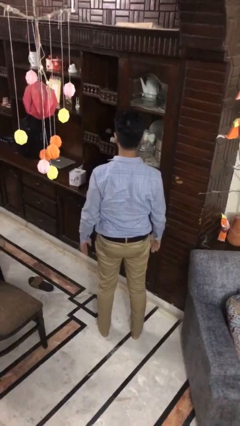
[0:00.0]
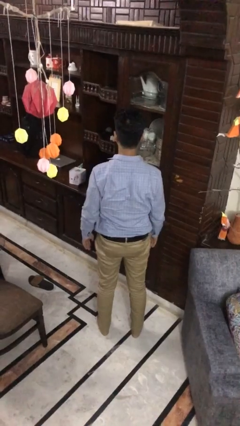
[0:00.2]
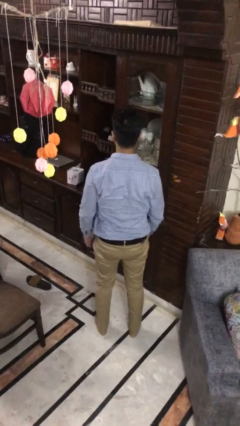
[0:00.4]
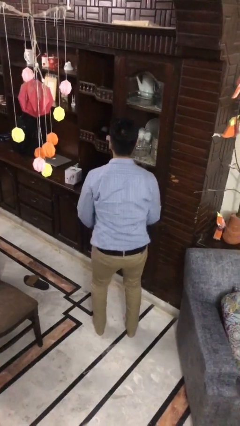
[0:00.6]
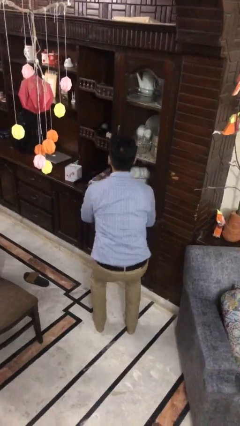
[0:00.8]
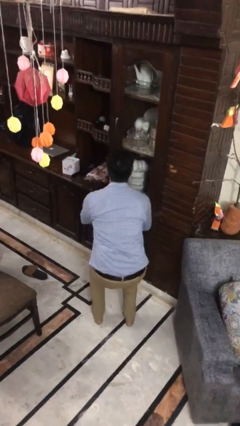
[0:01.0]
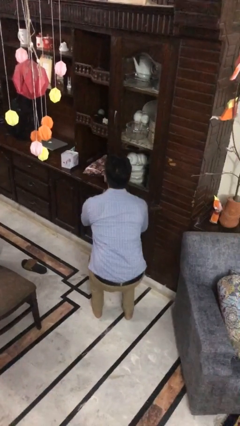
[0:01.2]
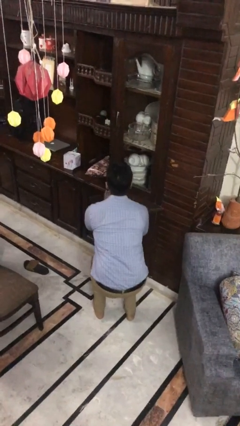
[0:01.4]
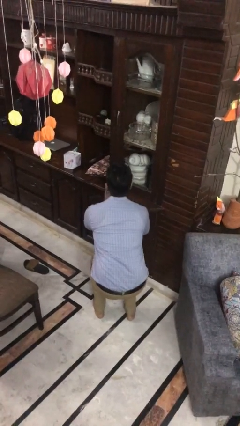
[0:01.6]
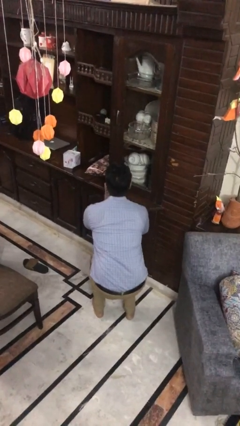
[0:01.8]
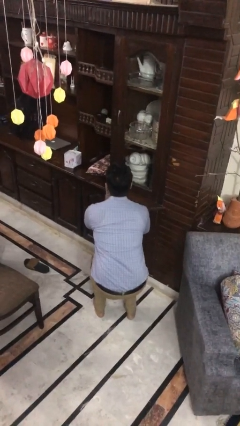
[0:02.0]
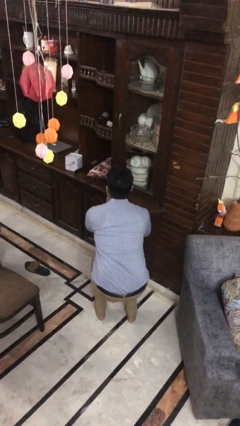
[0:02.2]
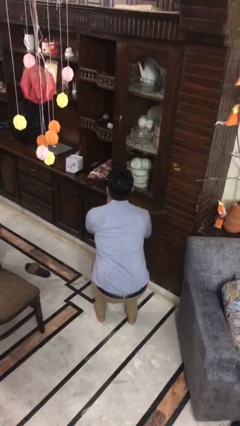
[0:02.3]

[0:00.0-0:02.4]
person squats

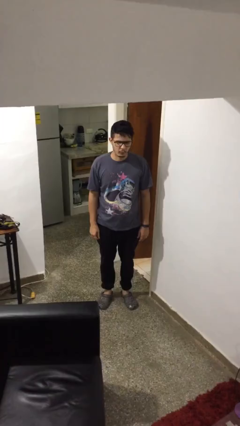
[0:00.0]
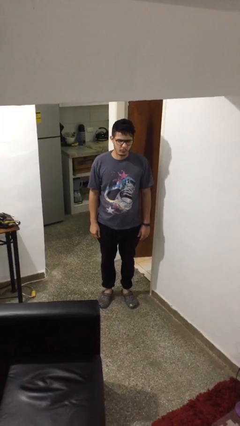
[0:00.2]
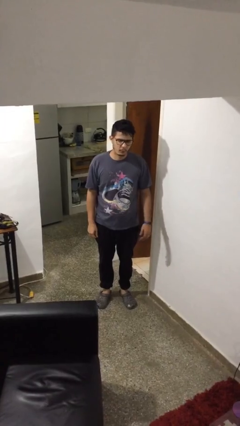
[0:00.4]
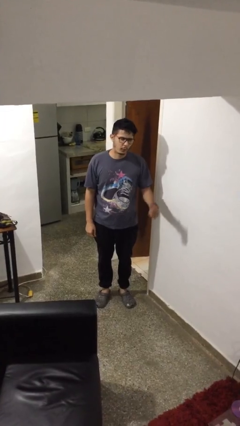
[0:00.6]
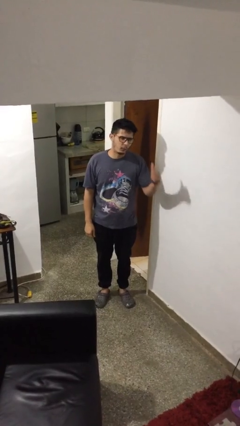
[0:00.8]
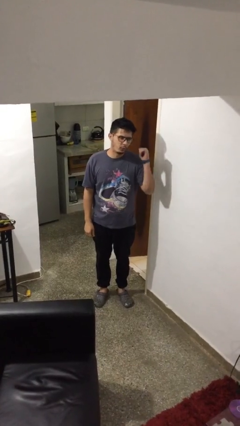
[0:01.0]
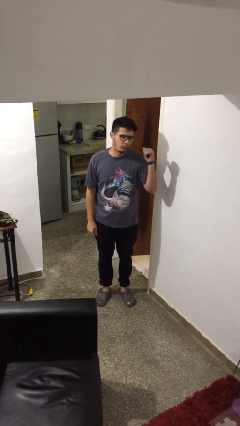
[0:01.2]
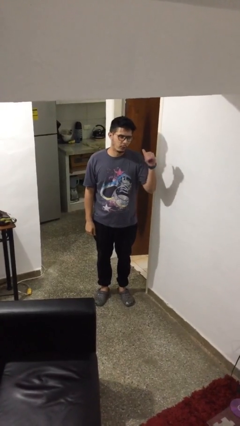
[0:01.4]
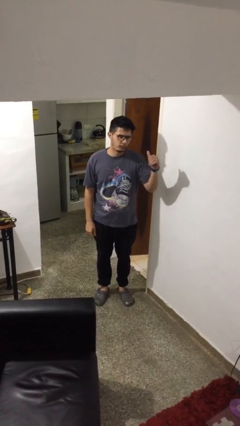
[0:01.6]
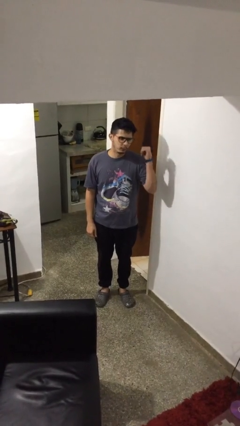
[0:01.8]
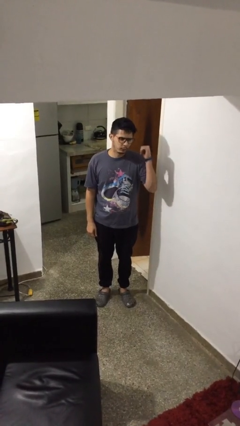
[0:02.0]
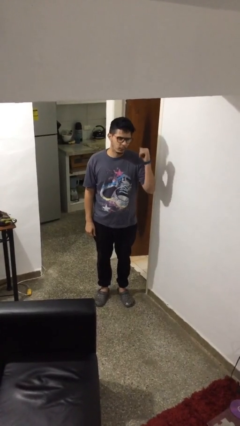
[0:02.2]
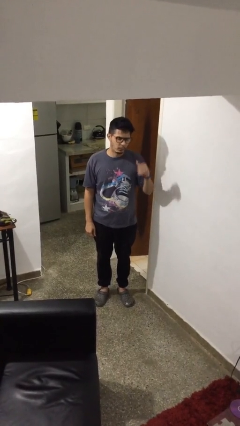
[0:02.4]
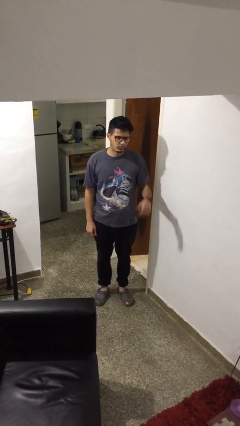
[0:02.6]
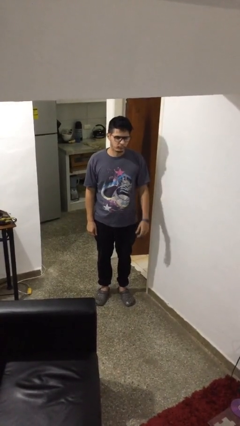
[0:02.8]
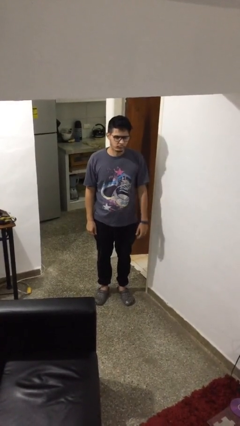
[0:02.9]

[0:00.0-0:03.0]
person gestures behind me

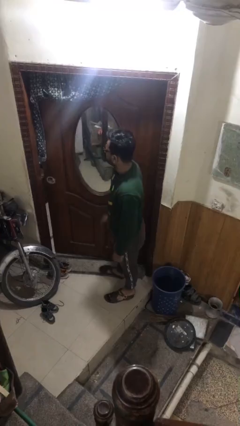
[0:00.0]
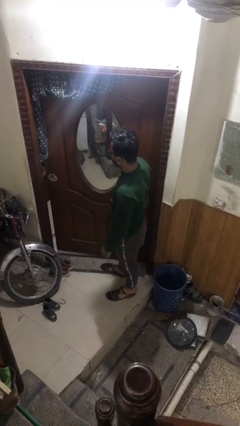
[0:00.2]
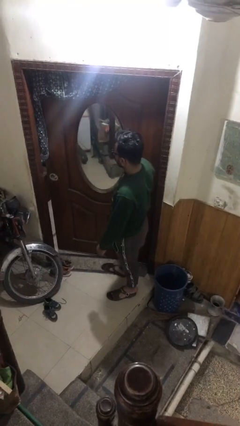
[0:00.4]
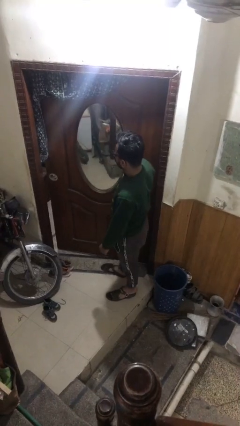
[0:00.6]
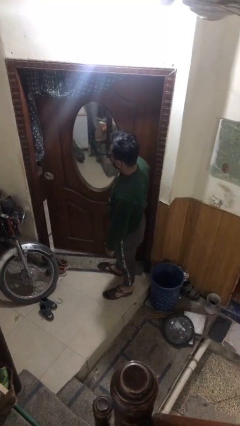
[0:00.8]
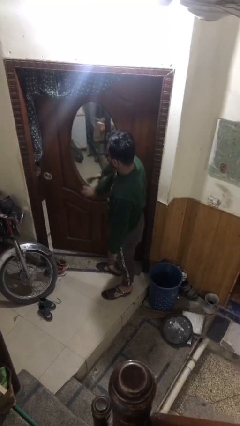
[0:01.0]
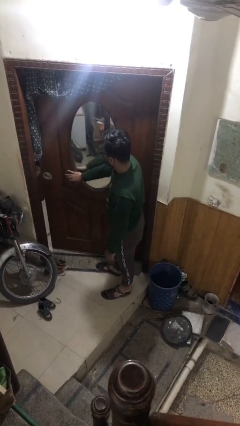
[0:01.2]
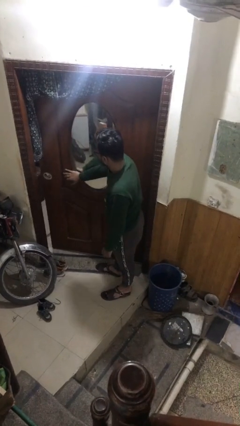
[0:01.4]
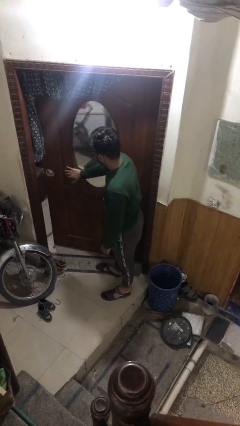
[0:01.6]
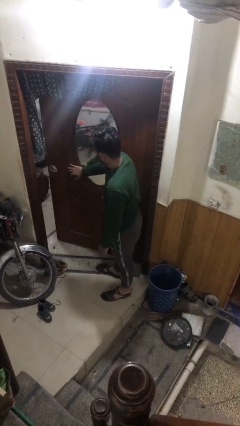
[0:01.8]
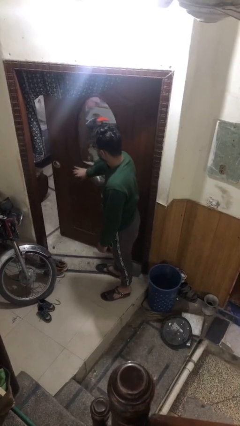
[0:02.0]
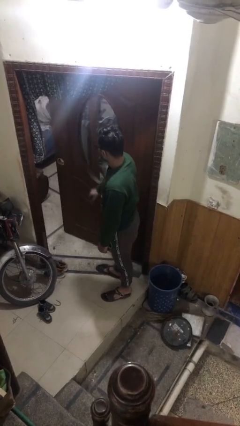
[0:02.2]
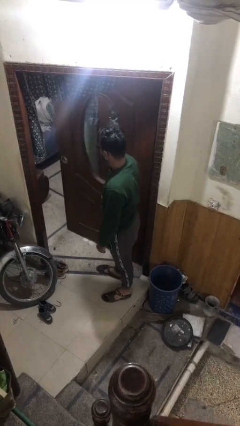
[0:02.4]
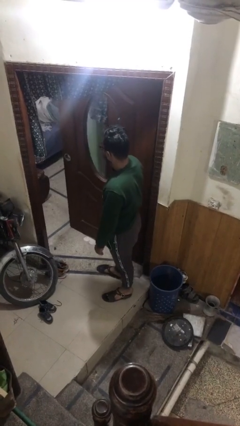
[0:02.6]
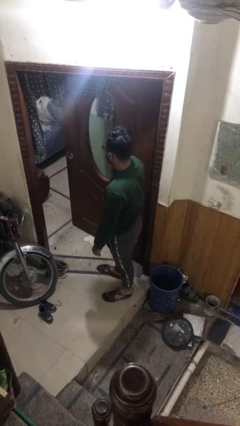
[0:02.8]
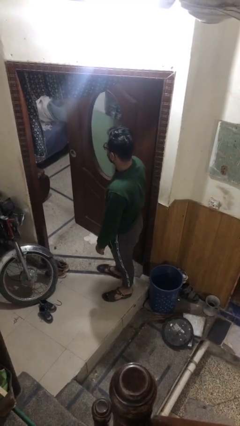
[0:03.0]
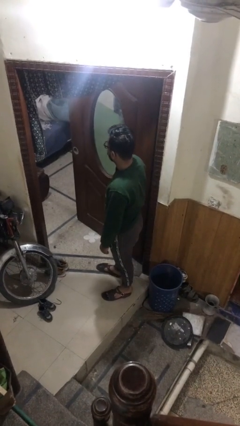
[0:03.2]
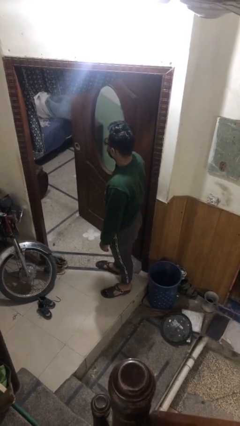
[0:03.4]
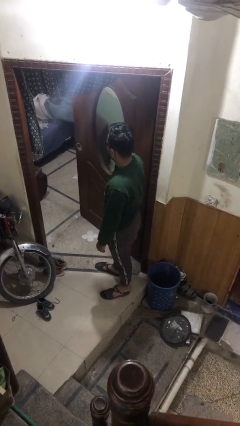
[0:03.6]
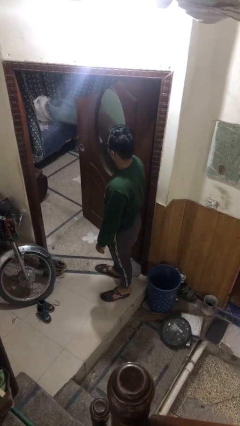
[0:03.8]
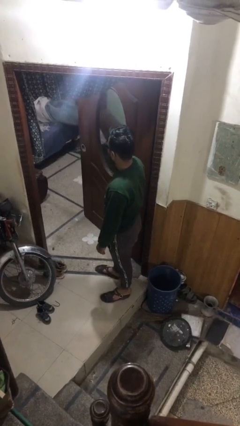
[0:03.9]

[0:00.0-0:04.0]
person opens facility door

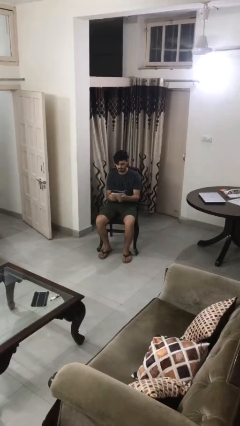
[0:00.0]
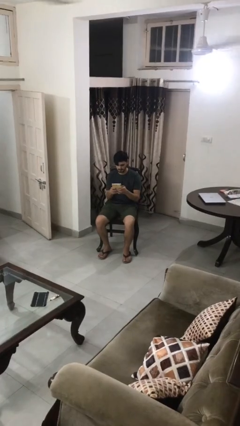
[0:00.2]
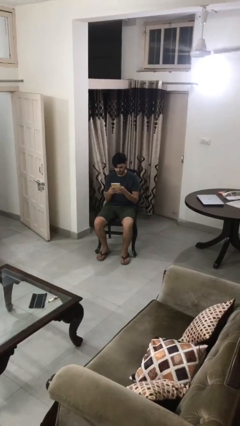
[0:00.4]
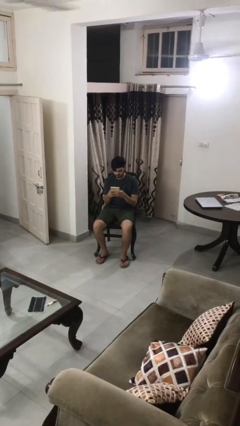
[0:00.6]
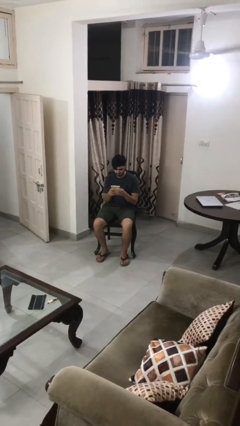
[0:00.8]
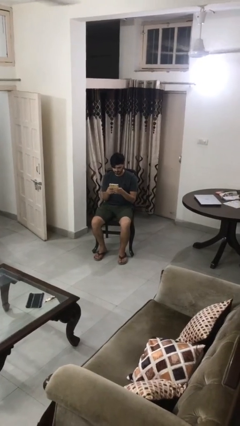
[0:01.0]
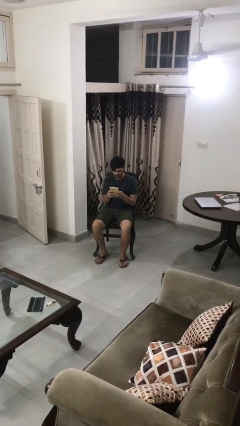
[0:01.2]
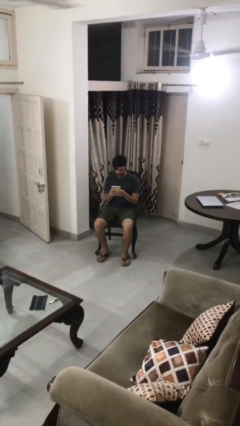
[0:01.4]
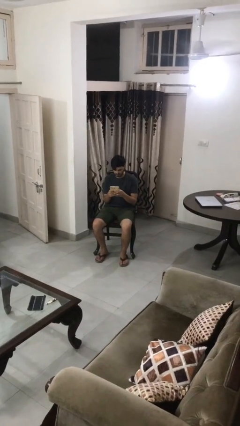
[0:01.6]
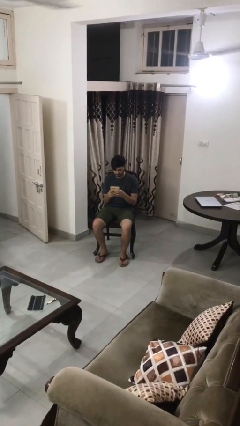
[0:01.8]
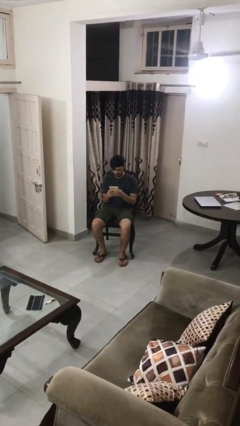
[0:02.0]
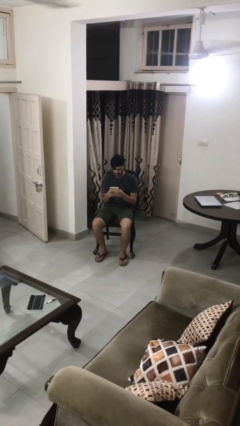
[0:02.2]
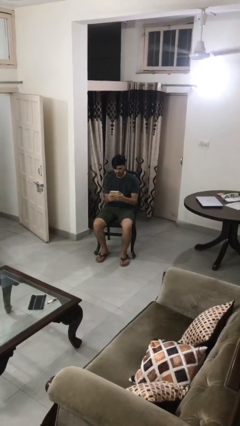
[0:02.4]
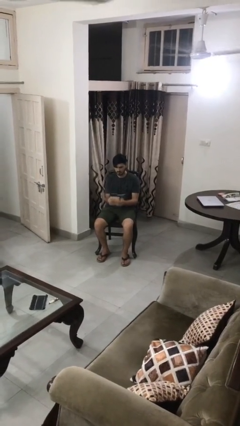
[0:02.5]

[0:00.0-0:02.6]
person interacts with tablet

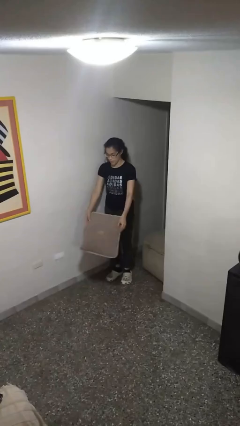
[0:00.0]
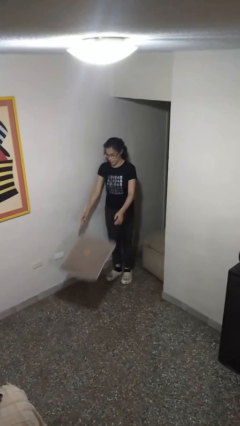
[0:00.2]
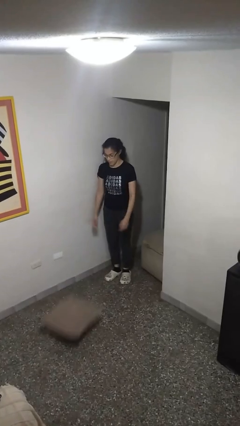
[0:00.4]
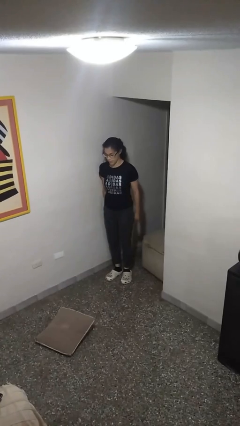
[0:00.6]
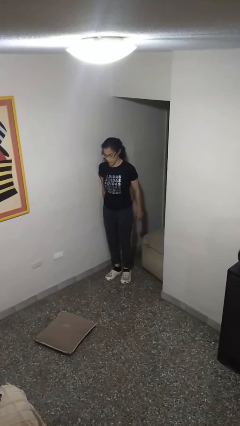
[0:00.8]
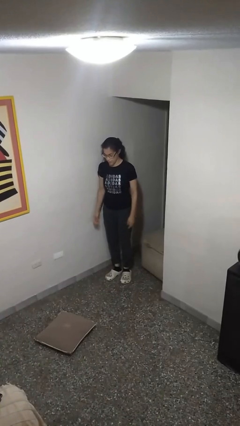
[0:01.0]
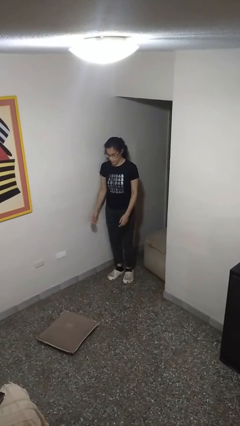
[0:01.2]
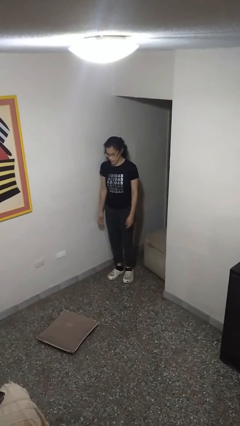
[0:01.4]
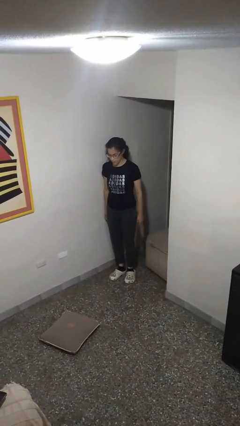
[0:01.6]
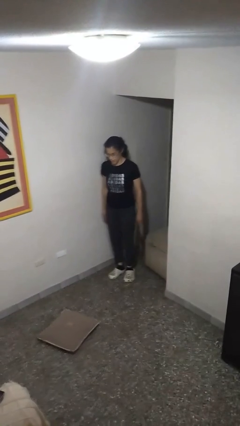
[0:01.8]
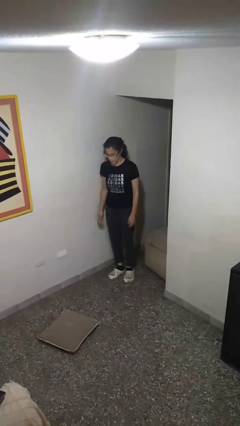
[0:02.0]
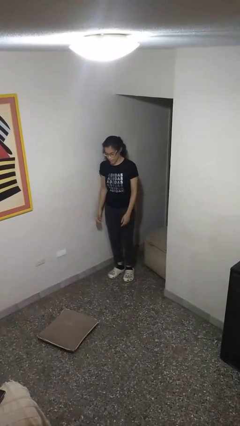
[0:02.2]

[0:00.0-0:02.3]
person throws object to ground

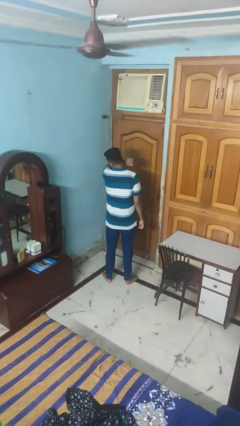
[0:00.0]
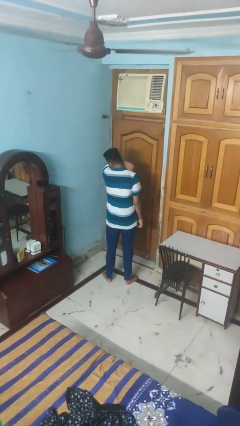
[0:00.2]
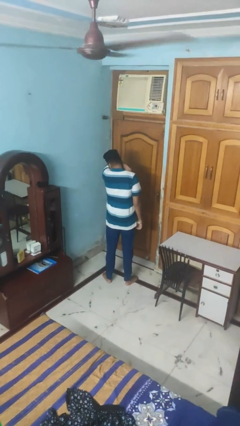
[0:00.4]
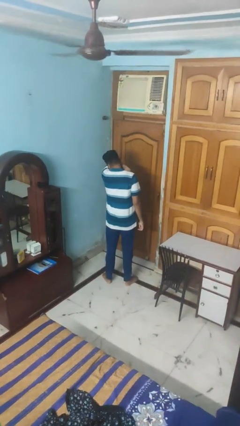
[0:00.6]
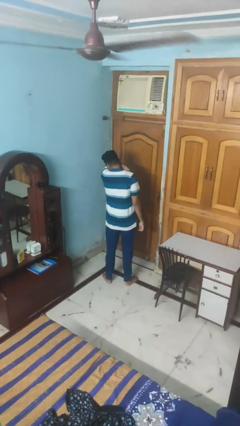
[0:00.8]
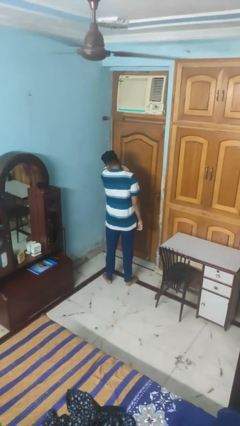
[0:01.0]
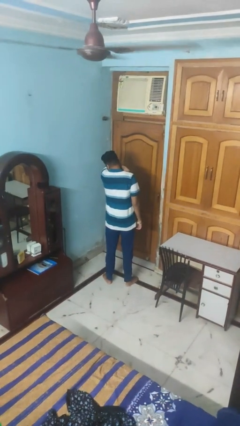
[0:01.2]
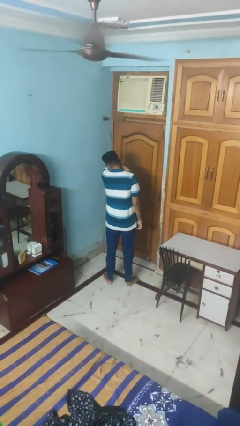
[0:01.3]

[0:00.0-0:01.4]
person sneezes into arm

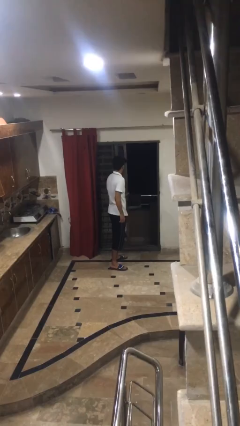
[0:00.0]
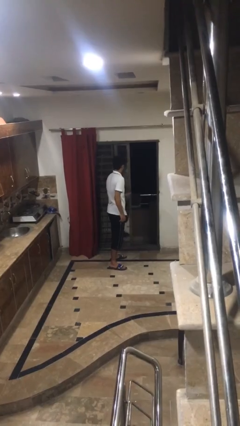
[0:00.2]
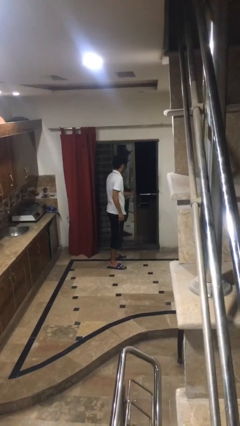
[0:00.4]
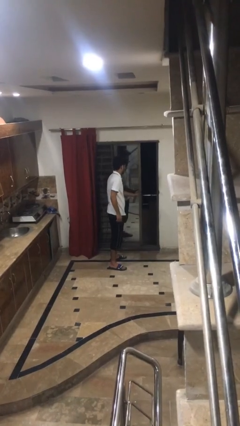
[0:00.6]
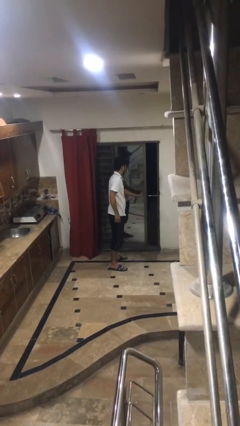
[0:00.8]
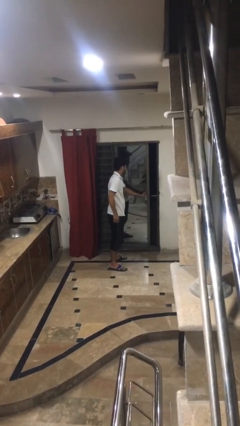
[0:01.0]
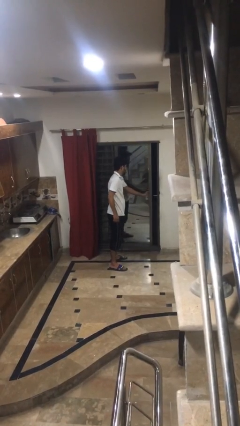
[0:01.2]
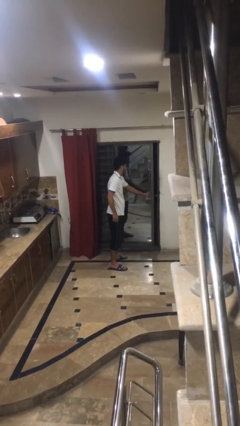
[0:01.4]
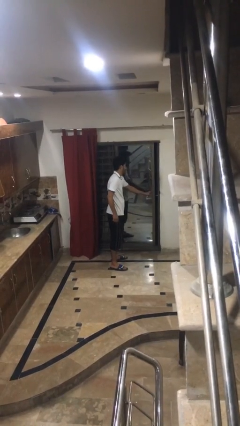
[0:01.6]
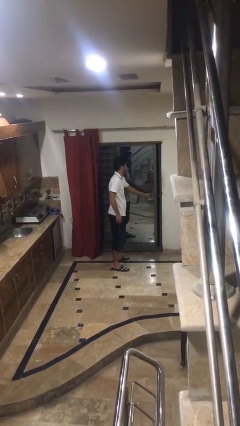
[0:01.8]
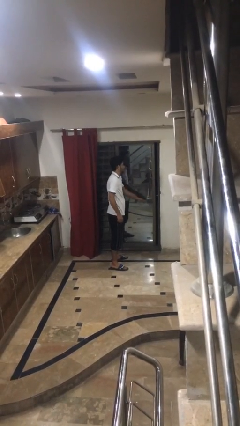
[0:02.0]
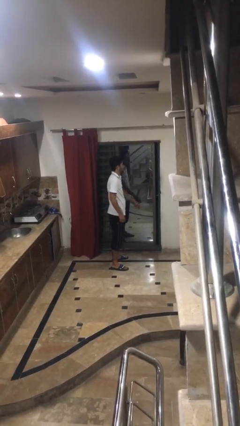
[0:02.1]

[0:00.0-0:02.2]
person closes sliding door
